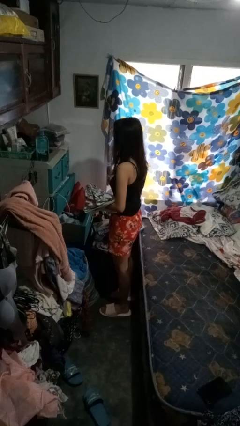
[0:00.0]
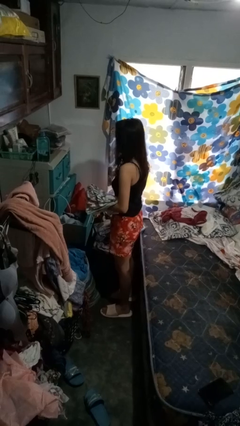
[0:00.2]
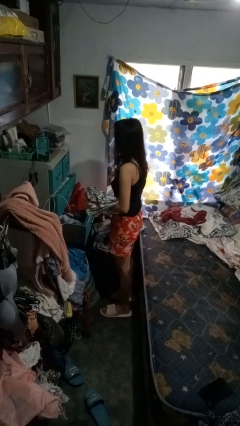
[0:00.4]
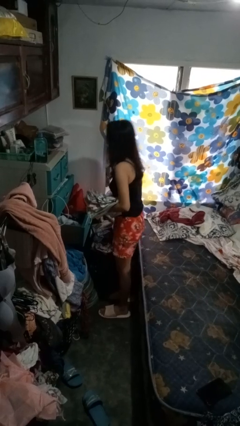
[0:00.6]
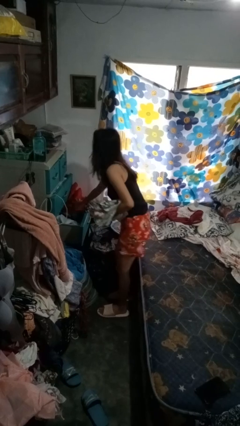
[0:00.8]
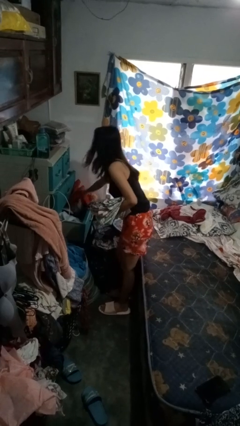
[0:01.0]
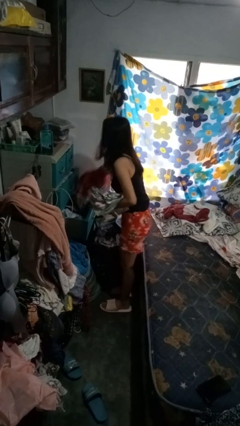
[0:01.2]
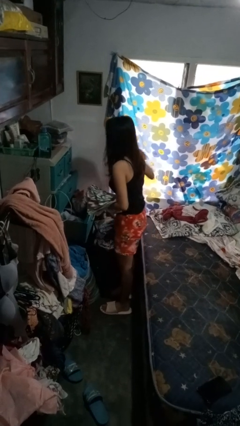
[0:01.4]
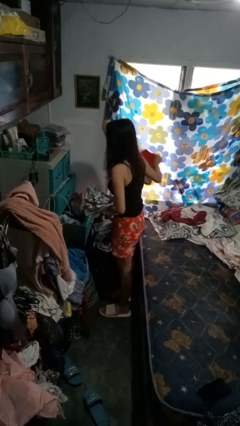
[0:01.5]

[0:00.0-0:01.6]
person takes clothes from dresser

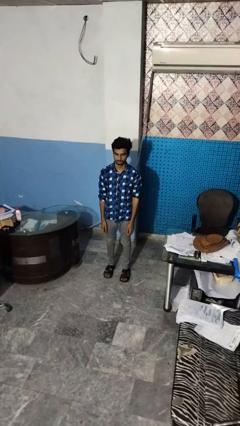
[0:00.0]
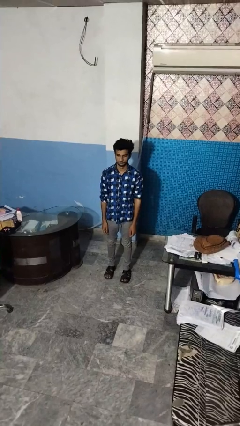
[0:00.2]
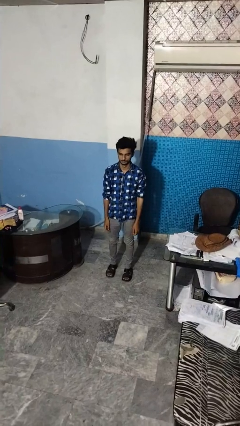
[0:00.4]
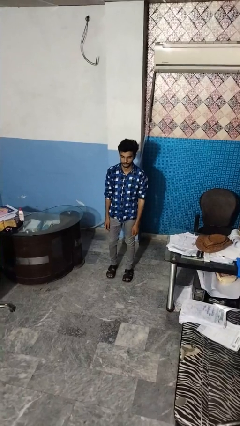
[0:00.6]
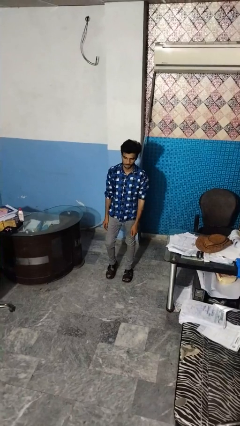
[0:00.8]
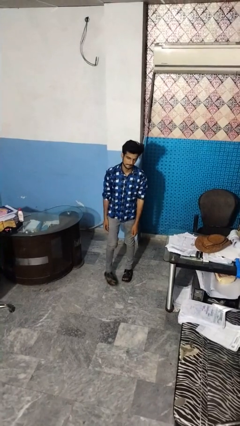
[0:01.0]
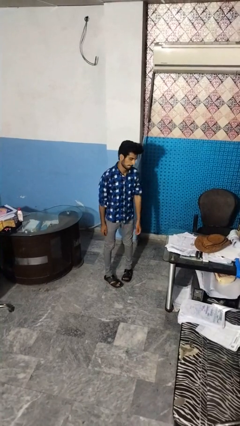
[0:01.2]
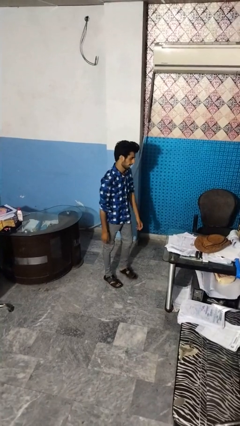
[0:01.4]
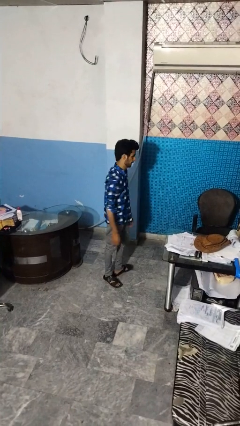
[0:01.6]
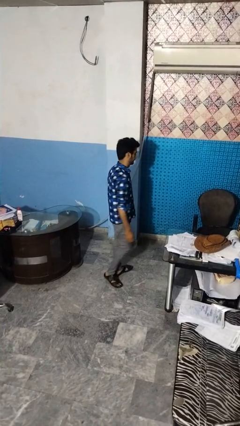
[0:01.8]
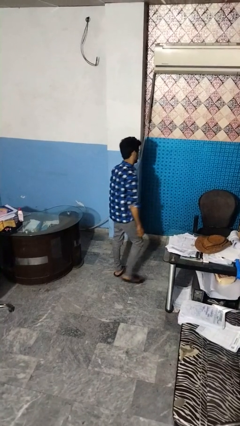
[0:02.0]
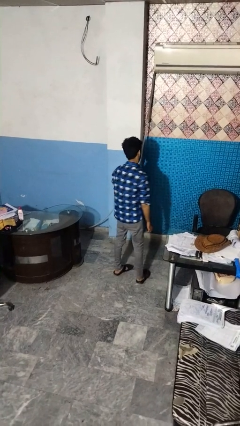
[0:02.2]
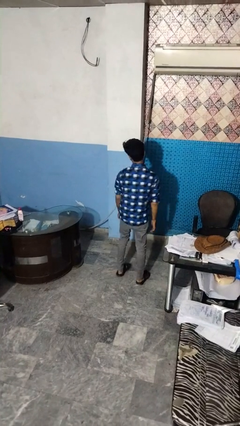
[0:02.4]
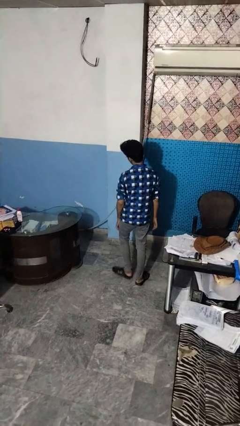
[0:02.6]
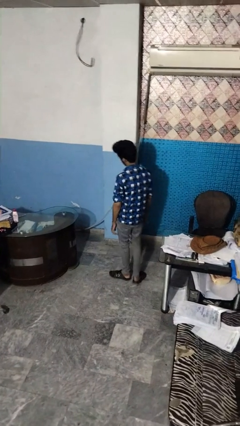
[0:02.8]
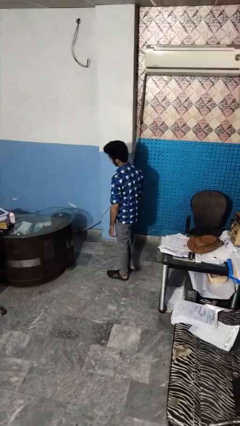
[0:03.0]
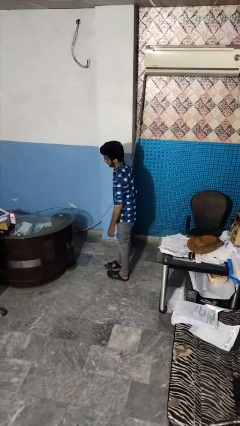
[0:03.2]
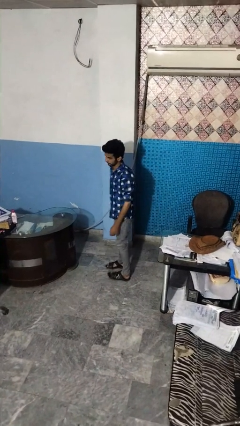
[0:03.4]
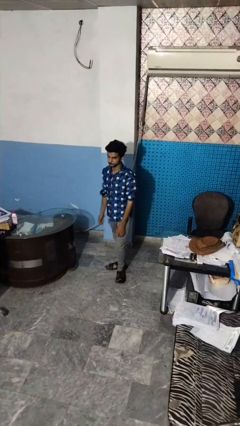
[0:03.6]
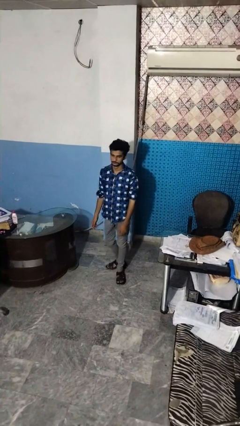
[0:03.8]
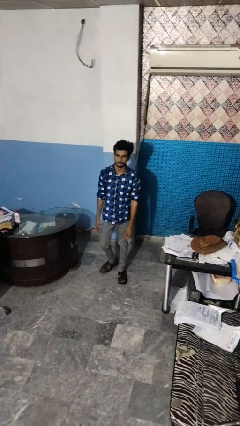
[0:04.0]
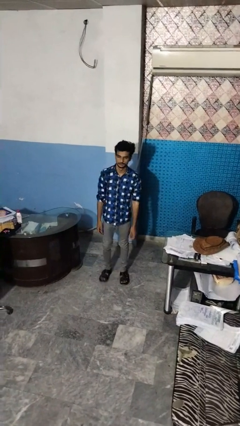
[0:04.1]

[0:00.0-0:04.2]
person twirls

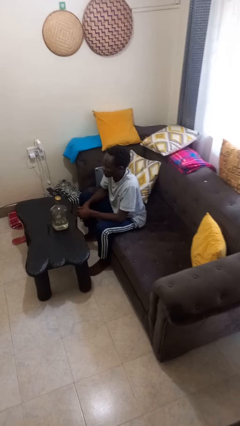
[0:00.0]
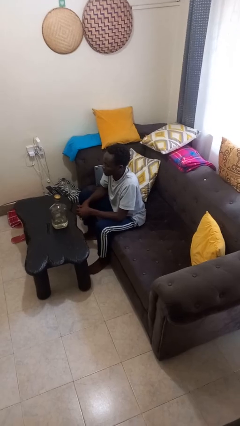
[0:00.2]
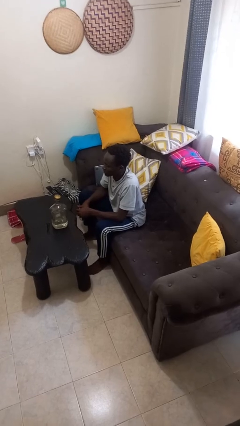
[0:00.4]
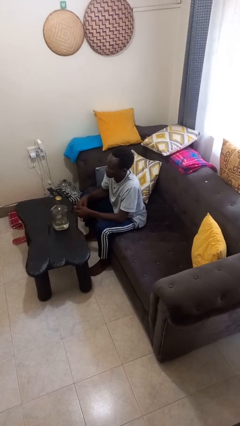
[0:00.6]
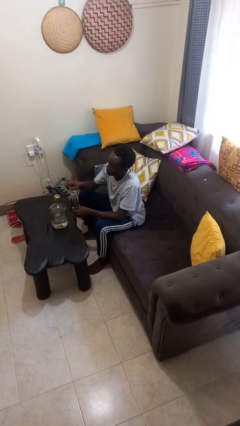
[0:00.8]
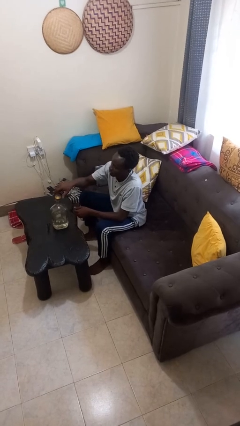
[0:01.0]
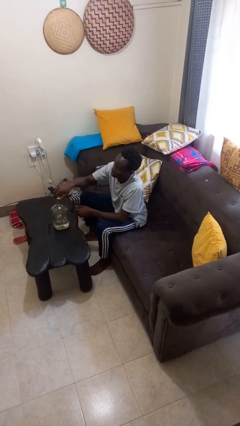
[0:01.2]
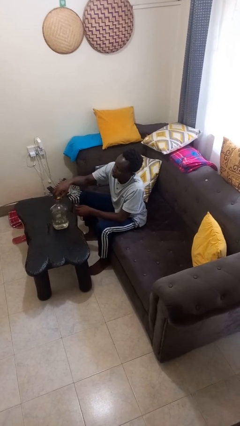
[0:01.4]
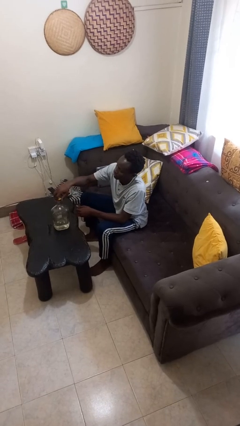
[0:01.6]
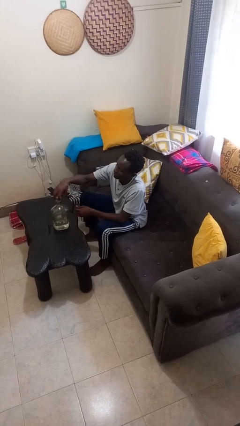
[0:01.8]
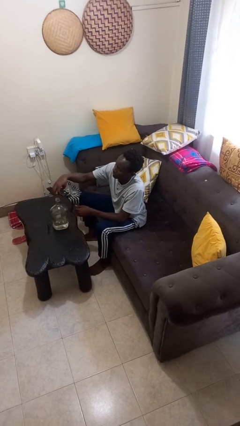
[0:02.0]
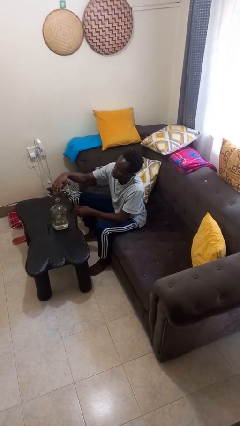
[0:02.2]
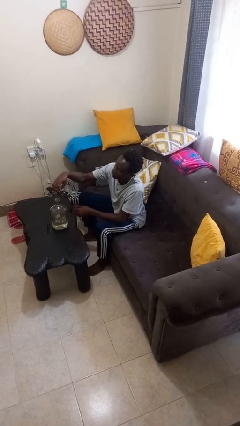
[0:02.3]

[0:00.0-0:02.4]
person unscrews lid from bottle

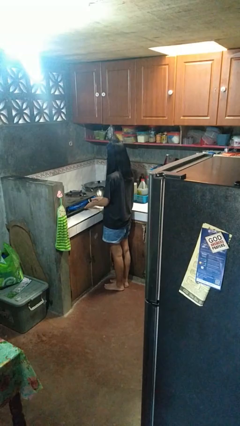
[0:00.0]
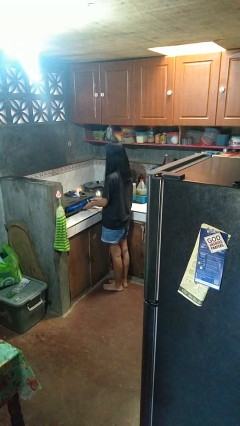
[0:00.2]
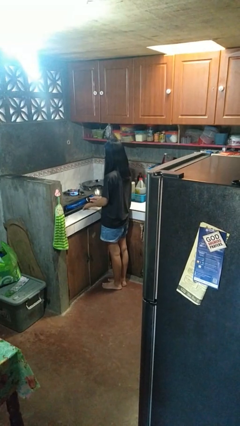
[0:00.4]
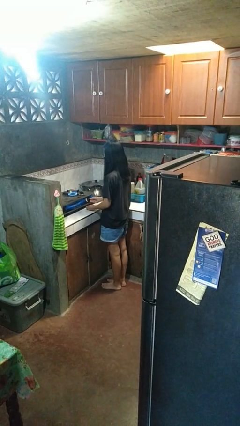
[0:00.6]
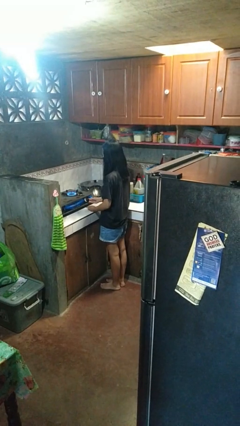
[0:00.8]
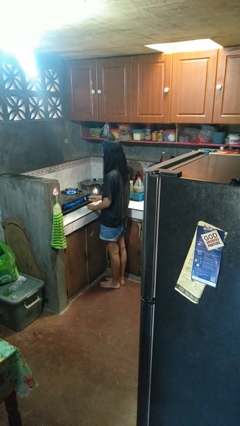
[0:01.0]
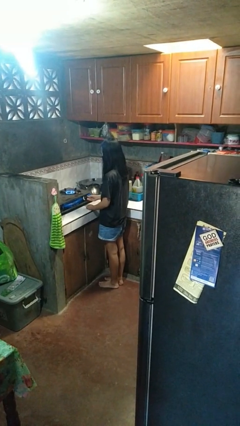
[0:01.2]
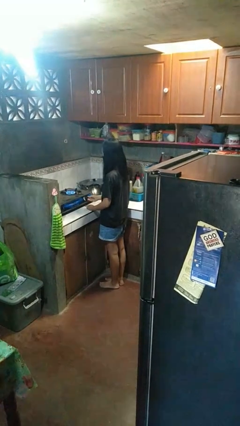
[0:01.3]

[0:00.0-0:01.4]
person turns on stovetop

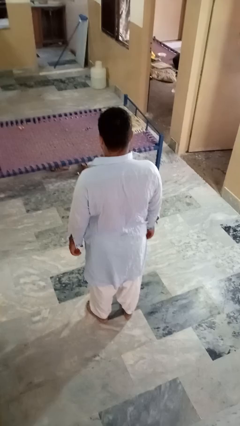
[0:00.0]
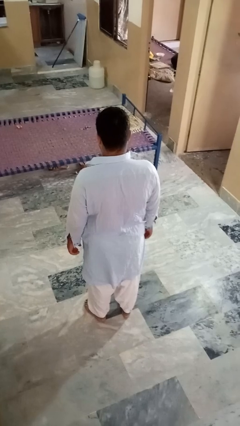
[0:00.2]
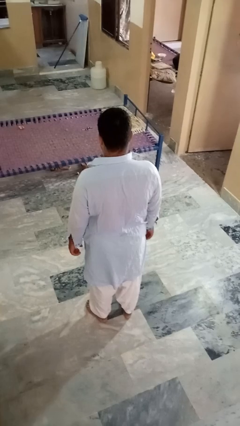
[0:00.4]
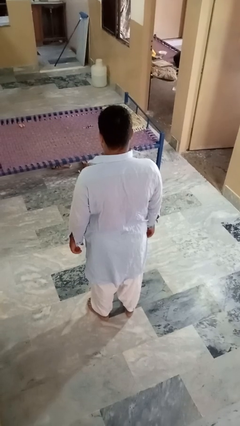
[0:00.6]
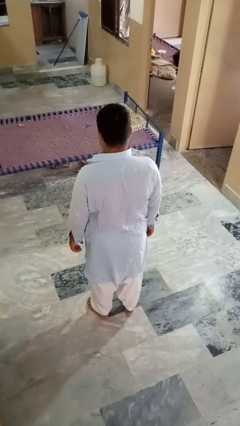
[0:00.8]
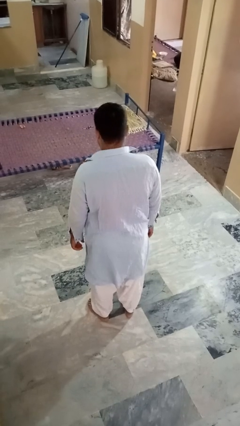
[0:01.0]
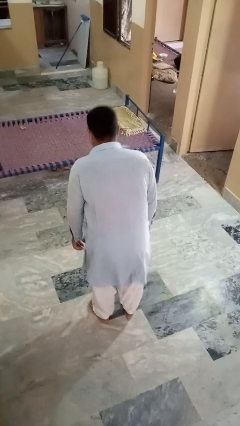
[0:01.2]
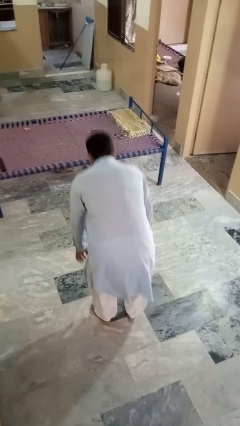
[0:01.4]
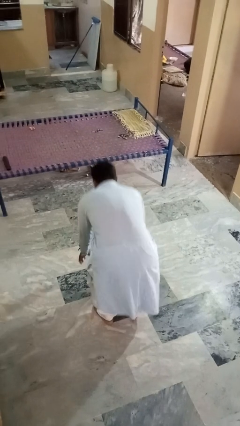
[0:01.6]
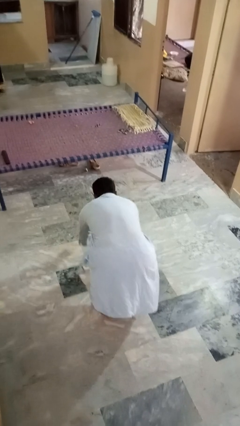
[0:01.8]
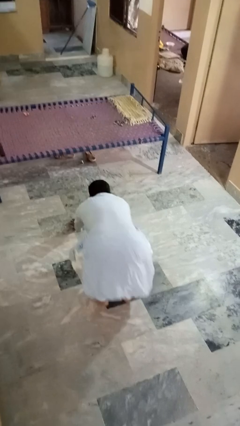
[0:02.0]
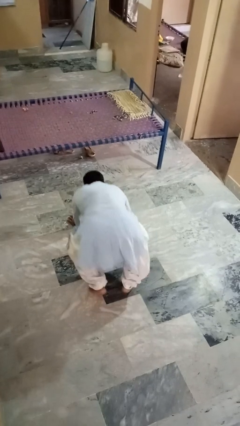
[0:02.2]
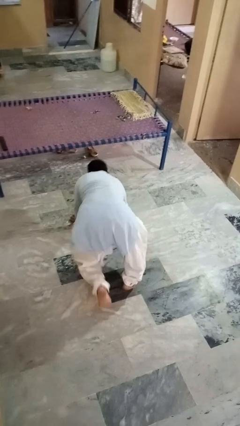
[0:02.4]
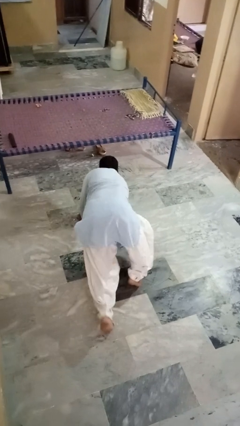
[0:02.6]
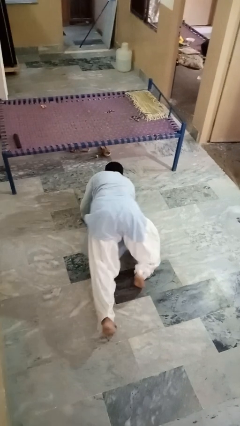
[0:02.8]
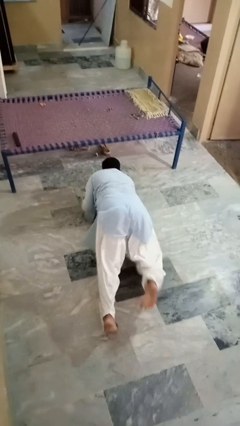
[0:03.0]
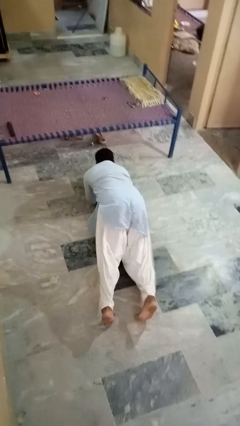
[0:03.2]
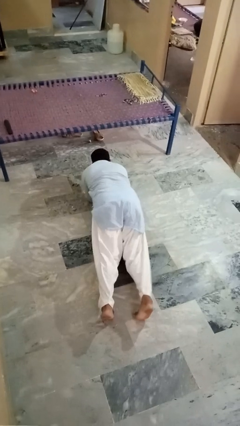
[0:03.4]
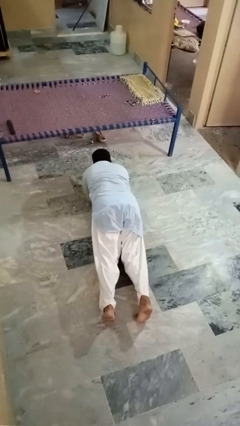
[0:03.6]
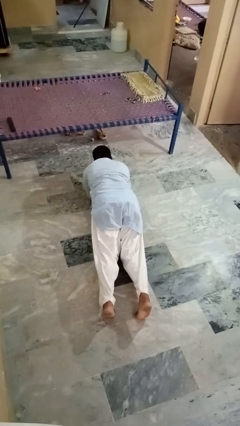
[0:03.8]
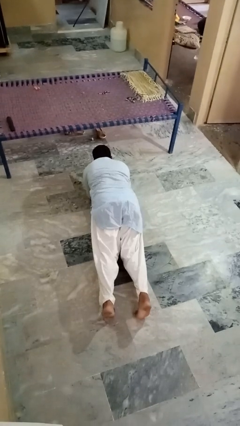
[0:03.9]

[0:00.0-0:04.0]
person exercises with plank

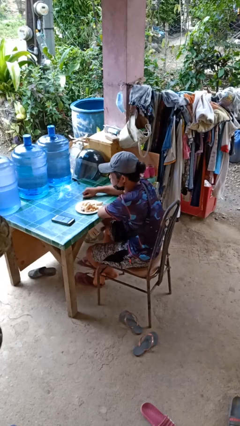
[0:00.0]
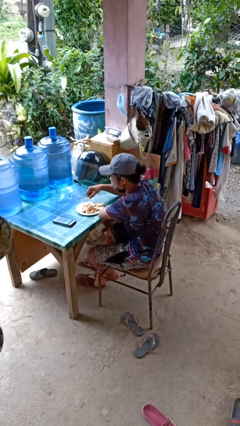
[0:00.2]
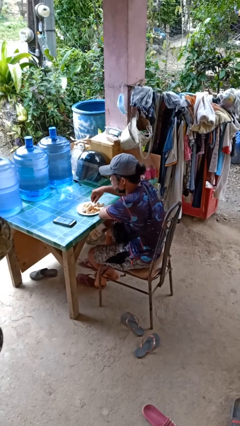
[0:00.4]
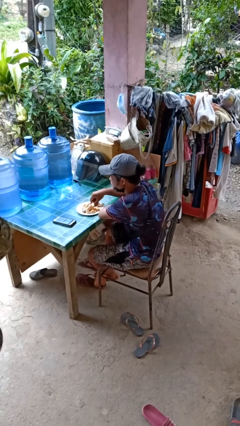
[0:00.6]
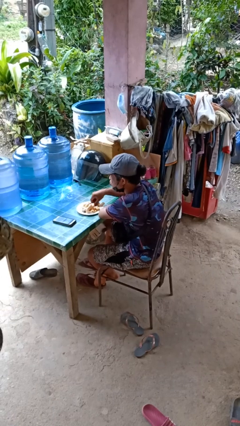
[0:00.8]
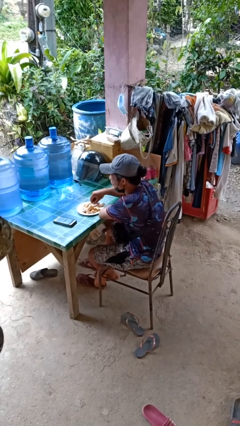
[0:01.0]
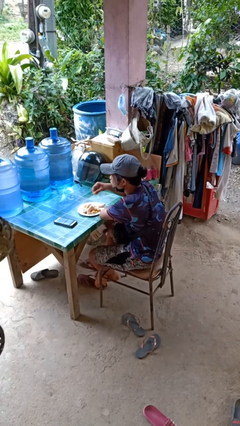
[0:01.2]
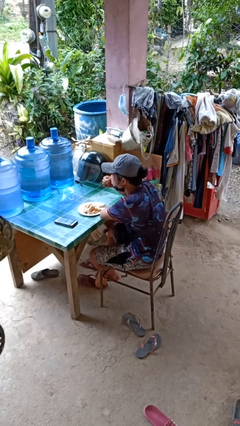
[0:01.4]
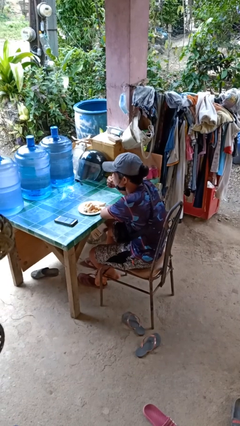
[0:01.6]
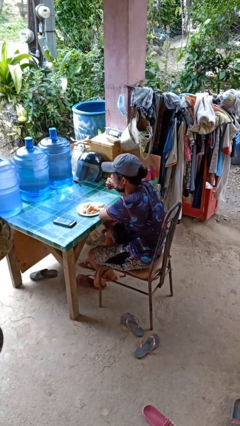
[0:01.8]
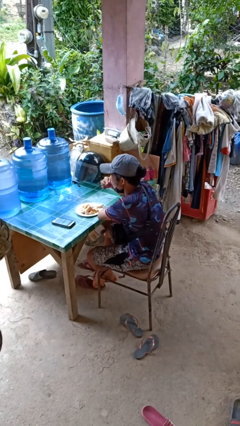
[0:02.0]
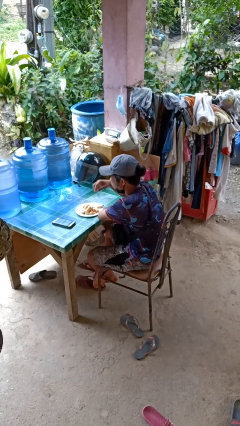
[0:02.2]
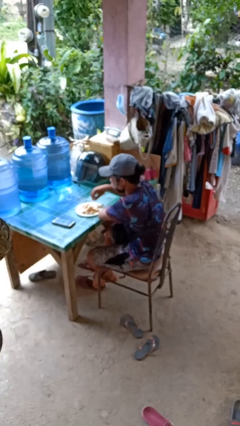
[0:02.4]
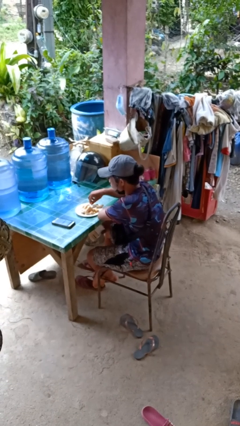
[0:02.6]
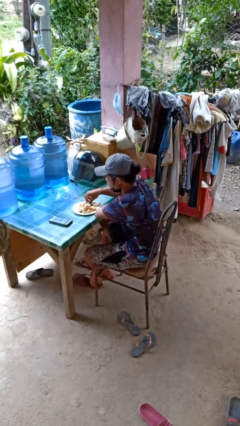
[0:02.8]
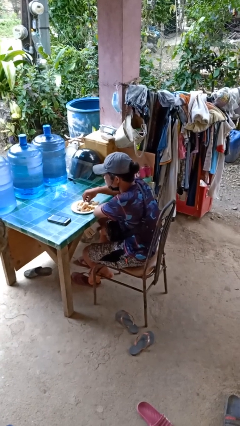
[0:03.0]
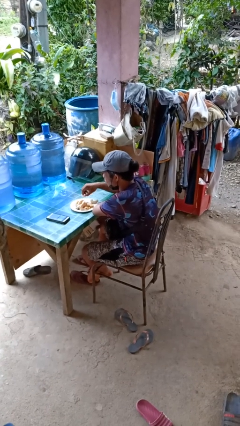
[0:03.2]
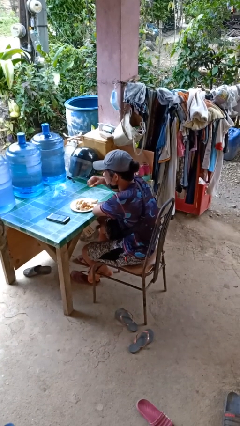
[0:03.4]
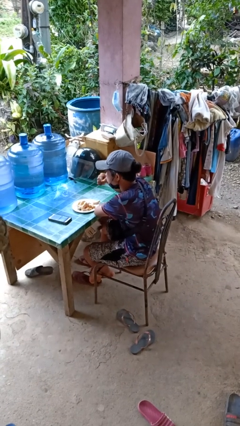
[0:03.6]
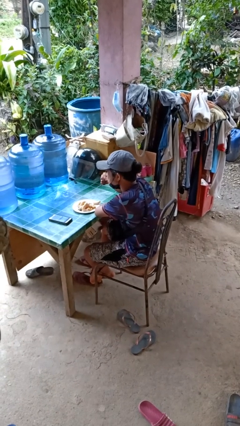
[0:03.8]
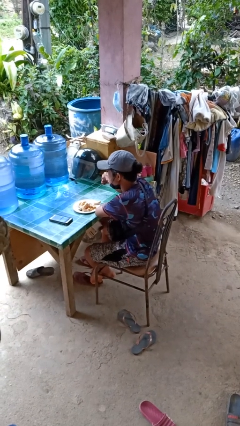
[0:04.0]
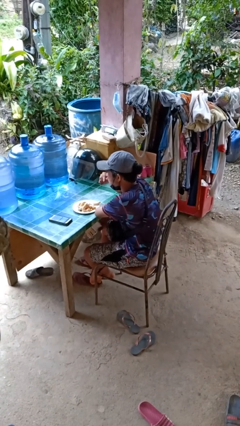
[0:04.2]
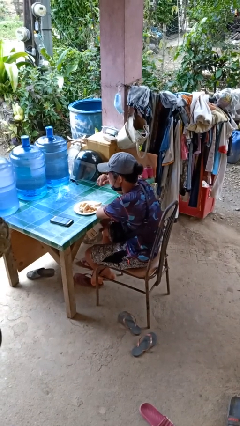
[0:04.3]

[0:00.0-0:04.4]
person eats with hands
